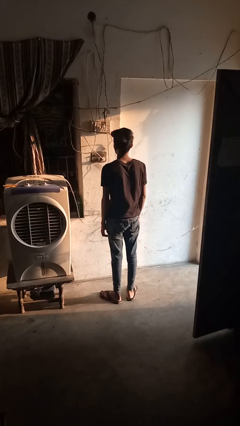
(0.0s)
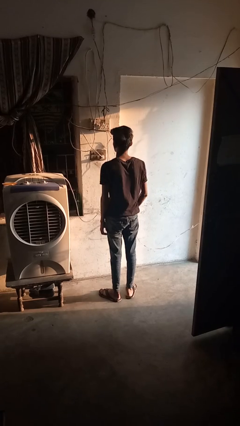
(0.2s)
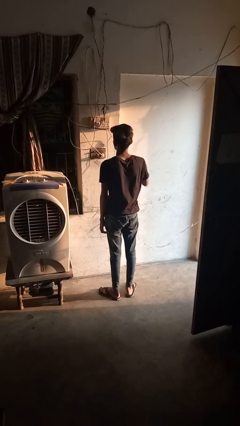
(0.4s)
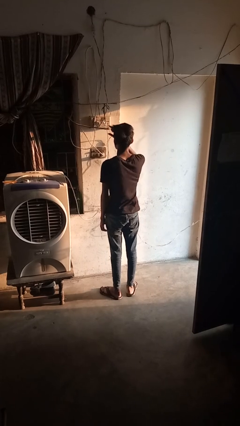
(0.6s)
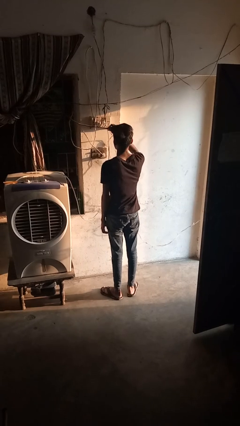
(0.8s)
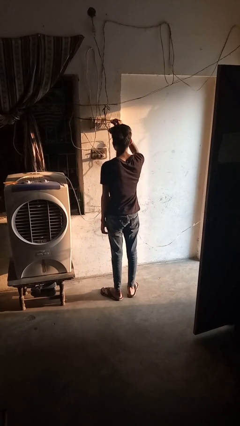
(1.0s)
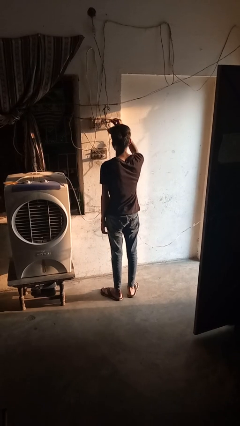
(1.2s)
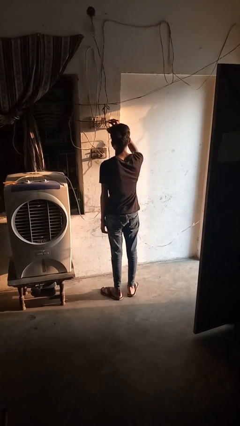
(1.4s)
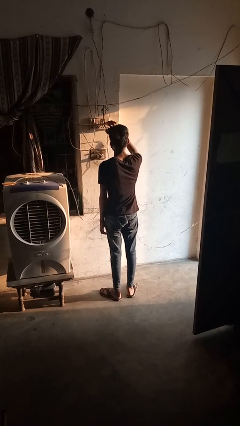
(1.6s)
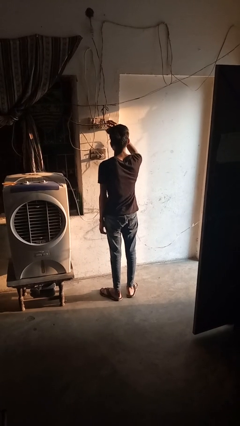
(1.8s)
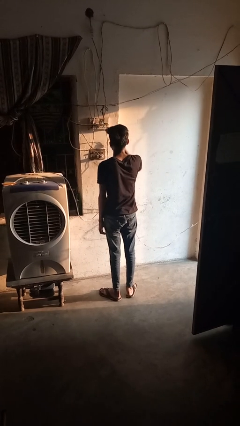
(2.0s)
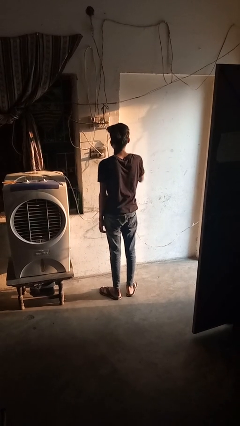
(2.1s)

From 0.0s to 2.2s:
person unplugs from electrical socket

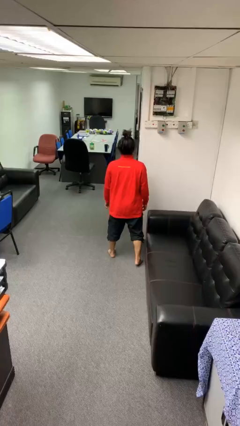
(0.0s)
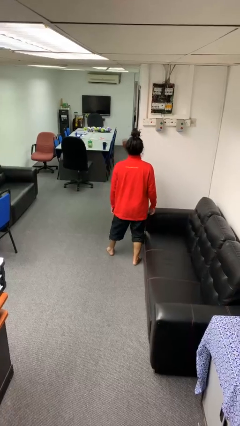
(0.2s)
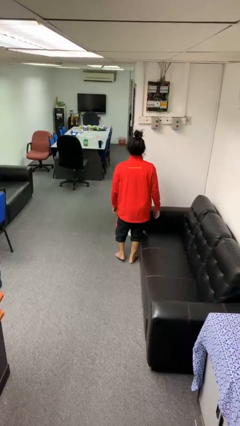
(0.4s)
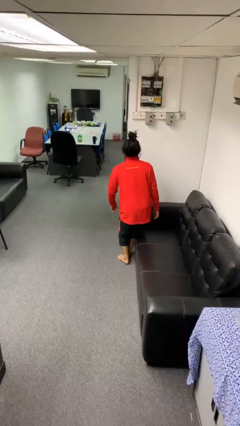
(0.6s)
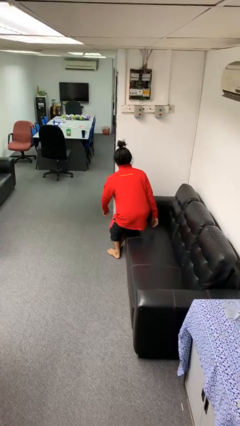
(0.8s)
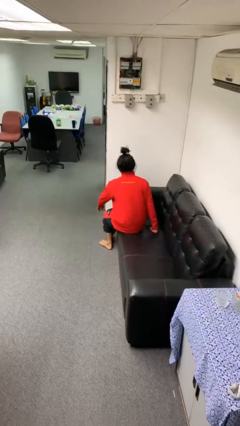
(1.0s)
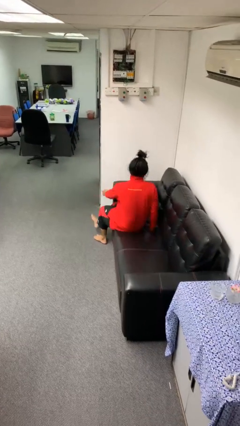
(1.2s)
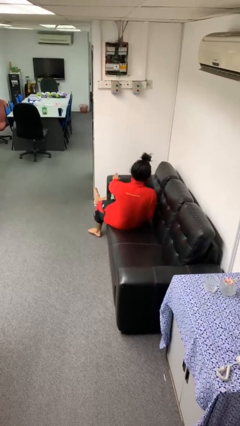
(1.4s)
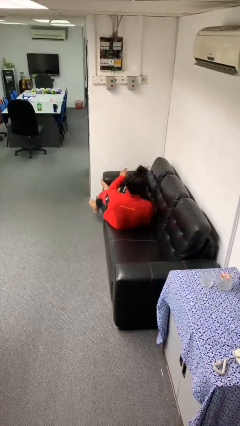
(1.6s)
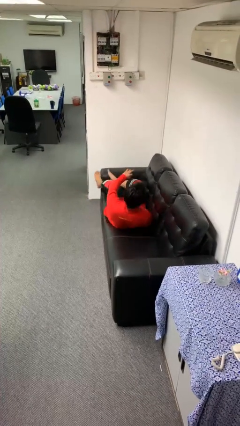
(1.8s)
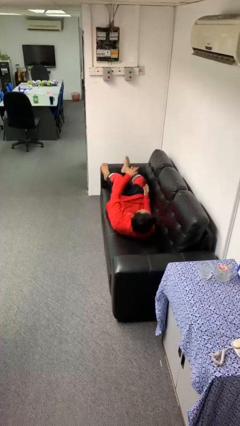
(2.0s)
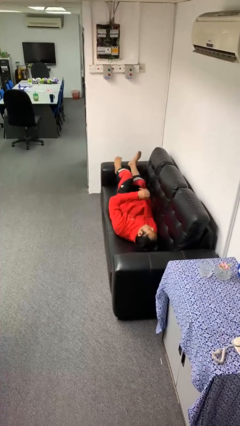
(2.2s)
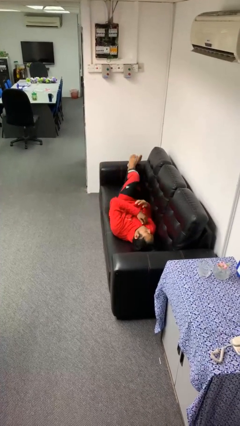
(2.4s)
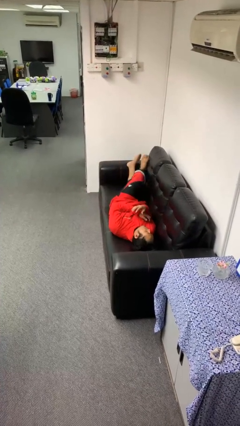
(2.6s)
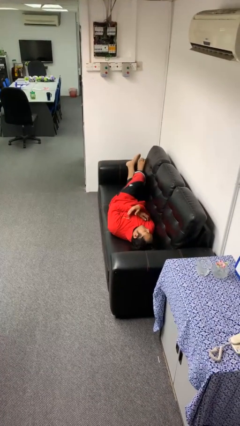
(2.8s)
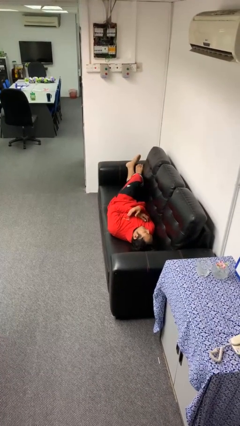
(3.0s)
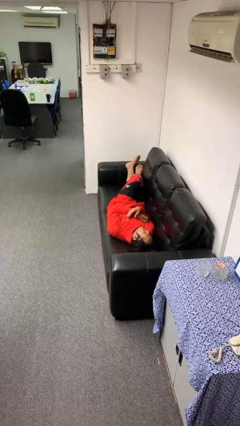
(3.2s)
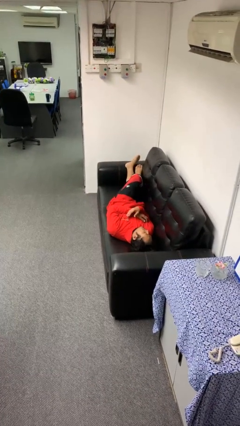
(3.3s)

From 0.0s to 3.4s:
person lies down on couch

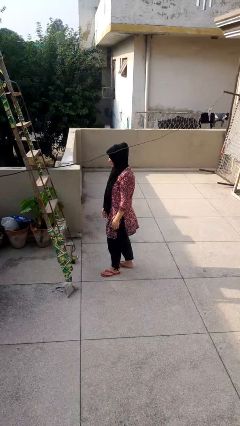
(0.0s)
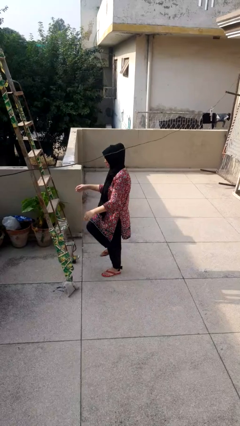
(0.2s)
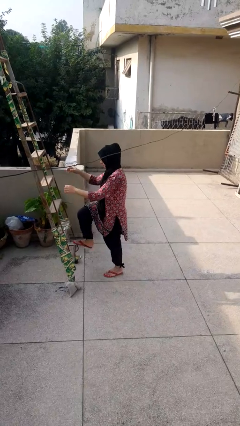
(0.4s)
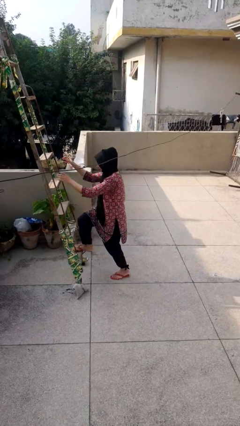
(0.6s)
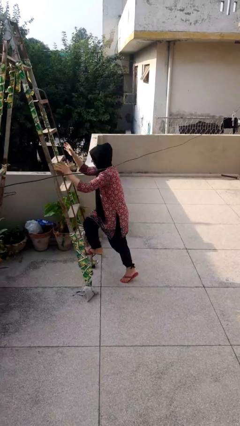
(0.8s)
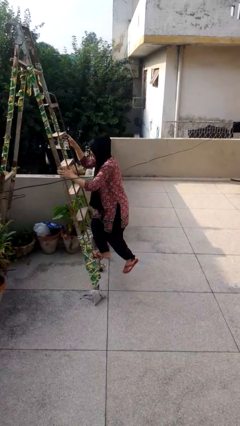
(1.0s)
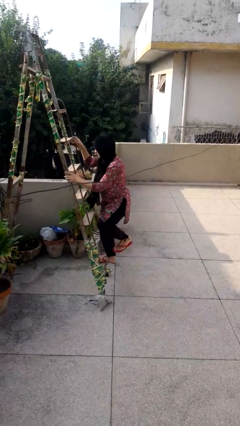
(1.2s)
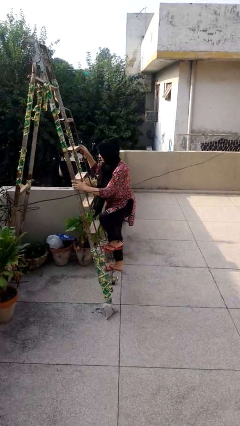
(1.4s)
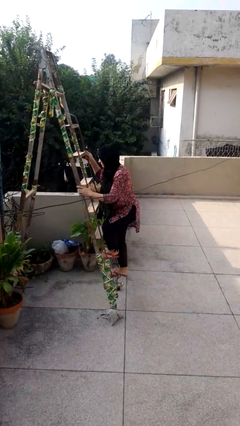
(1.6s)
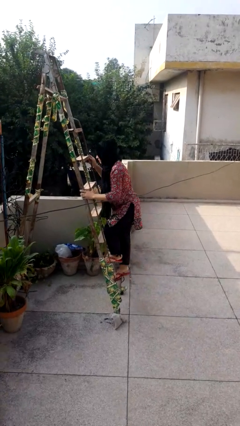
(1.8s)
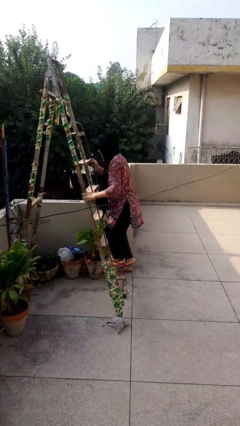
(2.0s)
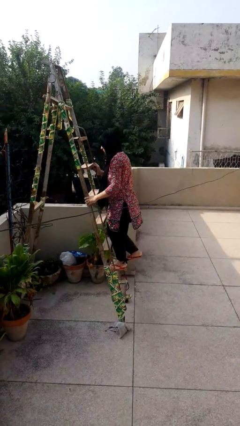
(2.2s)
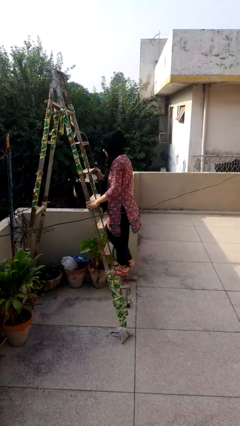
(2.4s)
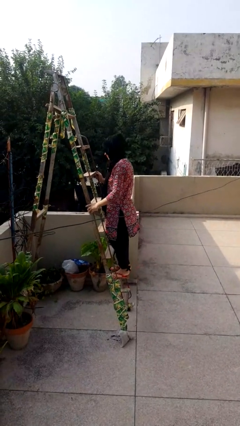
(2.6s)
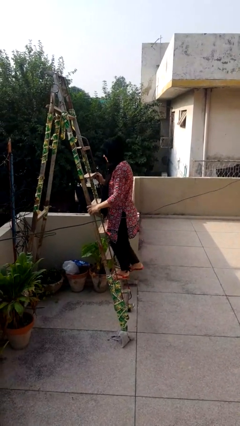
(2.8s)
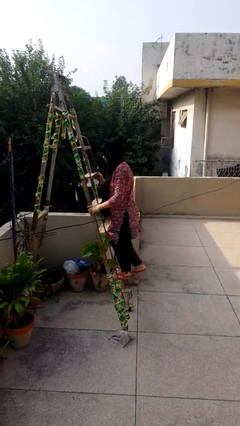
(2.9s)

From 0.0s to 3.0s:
person climbs up ladder

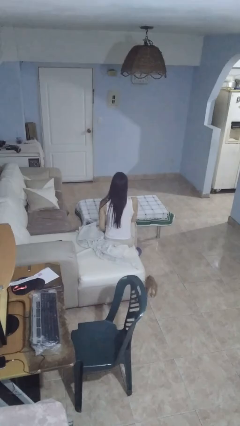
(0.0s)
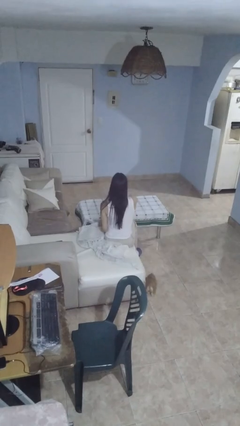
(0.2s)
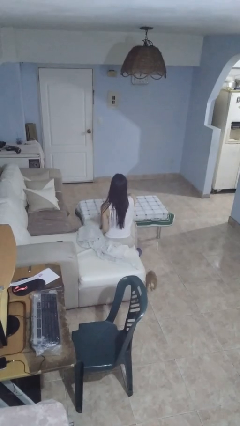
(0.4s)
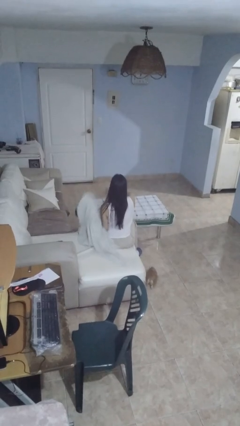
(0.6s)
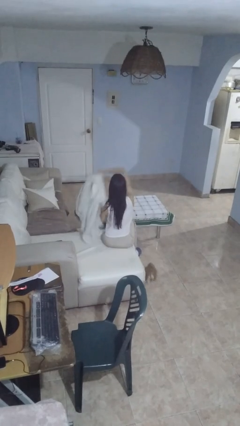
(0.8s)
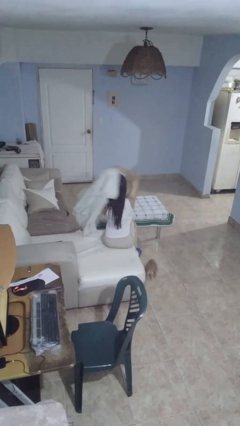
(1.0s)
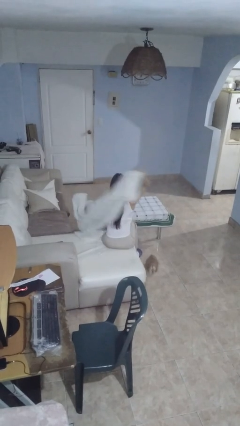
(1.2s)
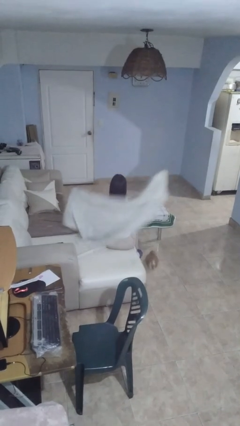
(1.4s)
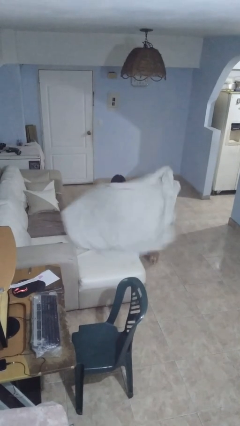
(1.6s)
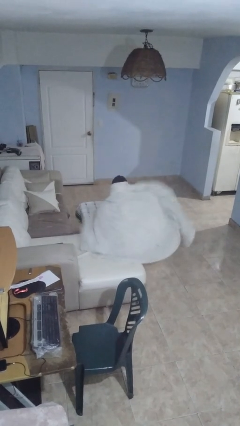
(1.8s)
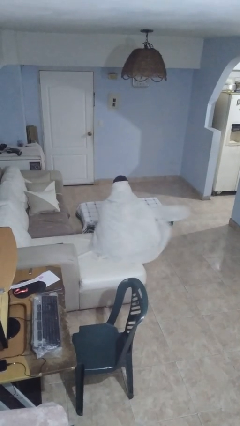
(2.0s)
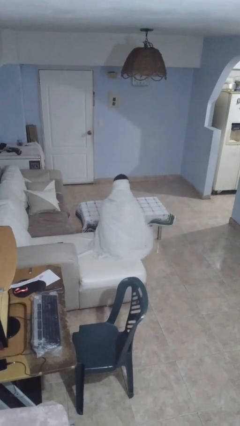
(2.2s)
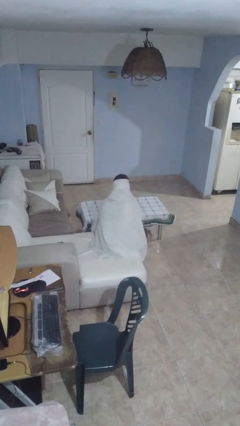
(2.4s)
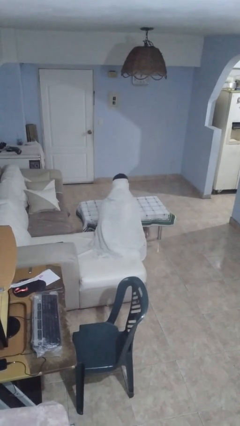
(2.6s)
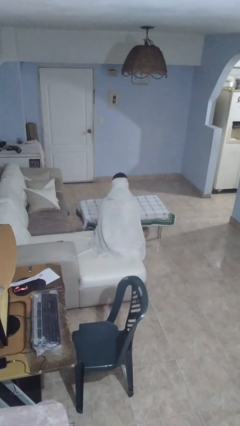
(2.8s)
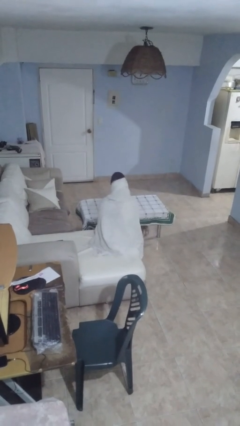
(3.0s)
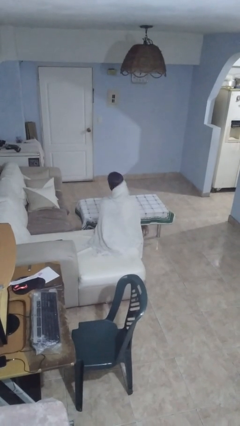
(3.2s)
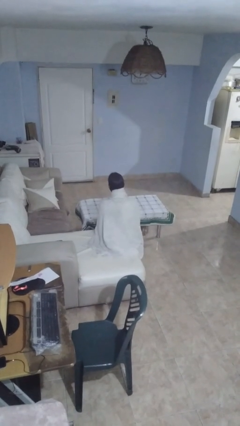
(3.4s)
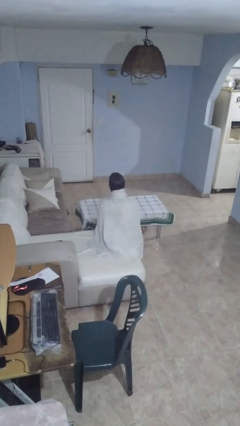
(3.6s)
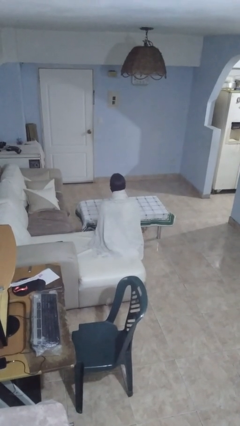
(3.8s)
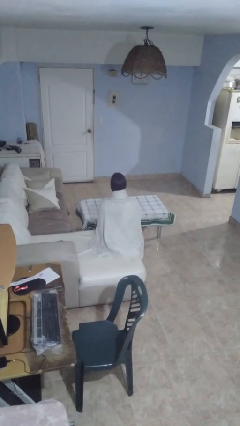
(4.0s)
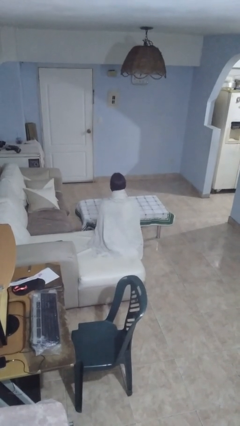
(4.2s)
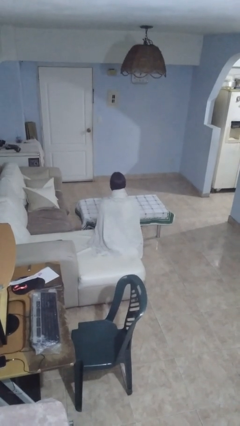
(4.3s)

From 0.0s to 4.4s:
person covers with blanket

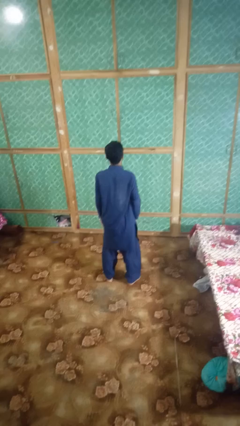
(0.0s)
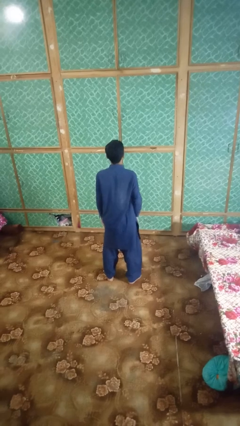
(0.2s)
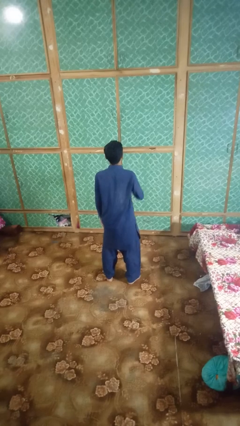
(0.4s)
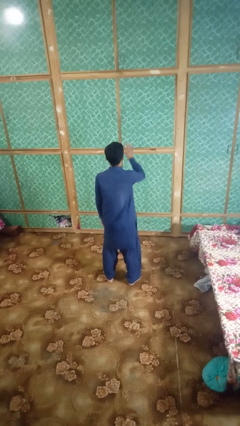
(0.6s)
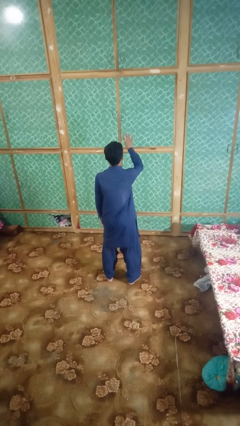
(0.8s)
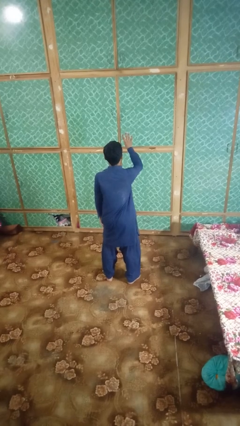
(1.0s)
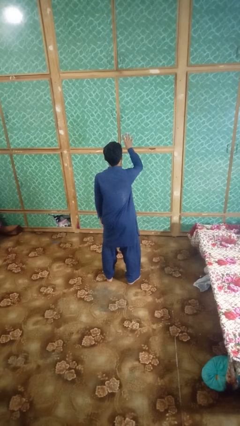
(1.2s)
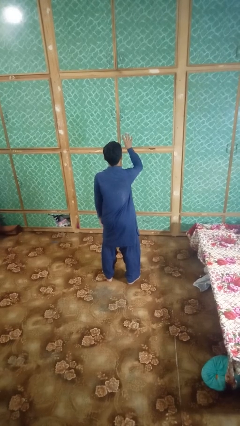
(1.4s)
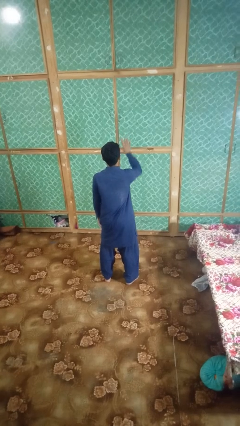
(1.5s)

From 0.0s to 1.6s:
person gestures number four

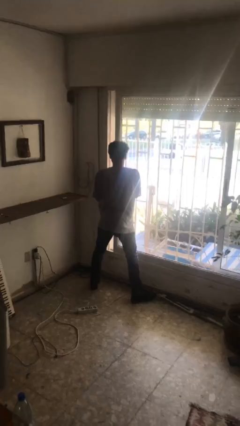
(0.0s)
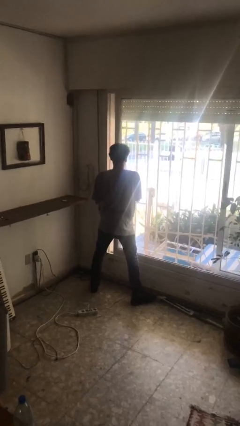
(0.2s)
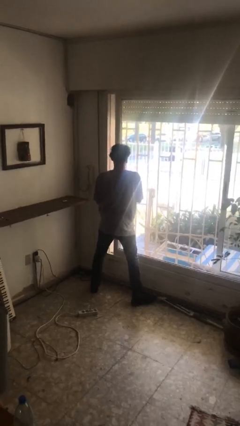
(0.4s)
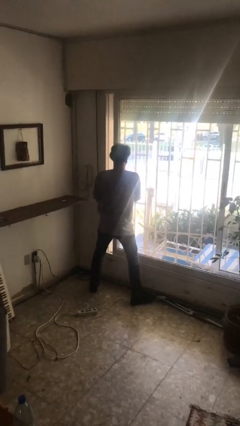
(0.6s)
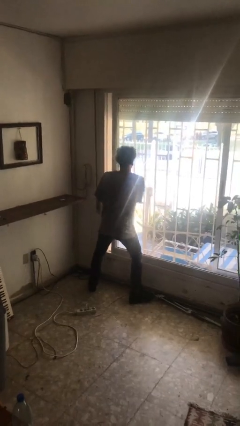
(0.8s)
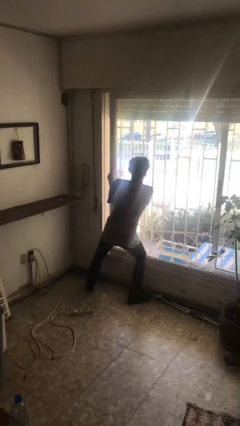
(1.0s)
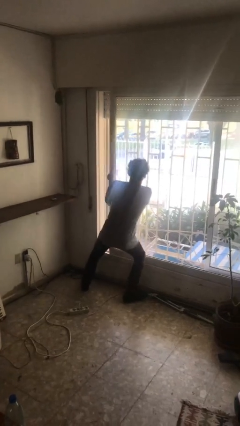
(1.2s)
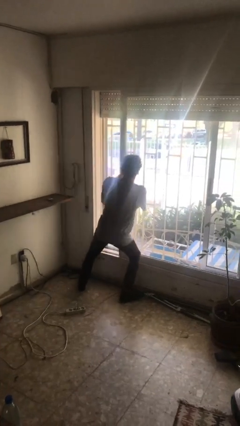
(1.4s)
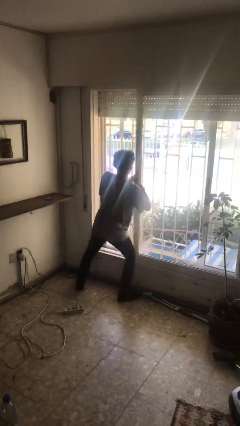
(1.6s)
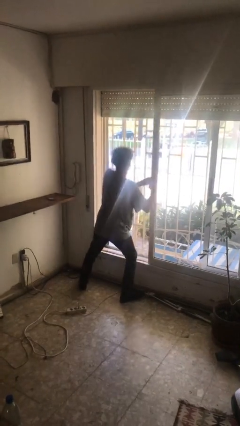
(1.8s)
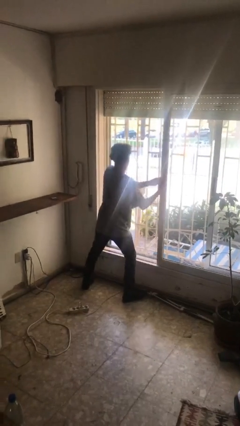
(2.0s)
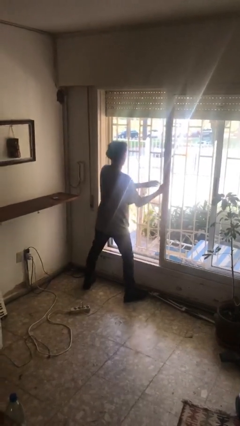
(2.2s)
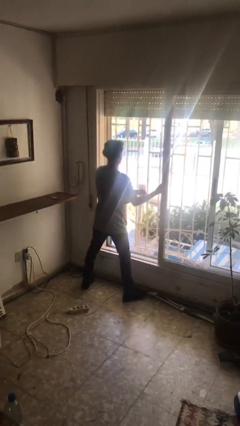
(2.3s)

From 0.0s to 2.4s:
person opens sliding door
